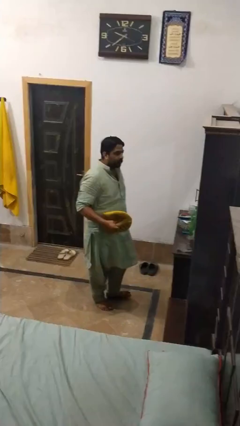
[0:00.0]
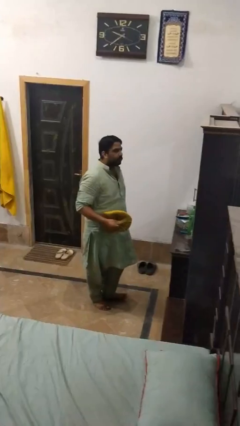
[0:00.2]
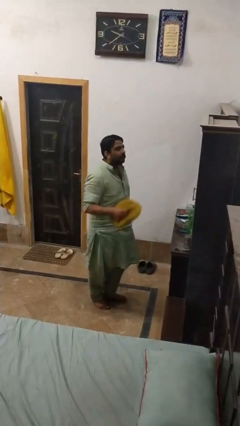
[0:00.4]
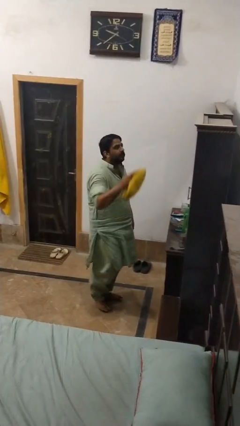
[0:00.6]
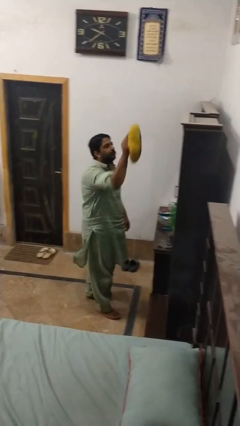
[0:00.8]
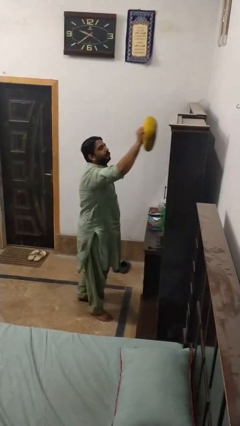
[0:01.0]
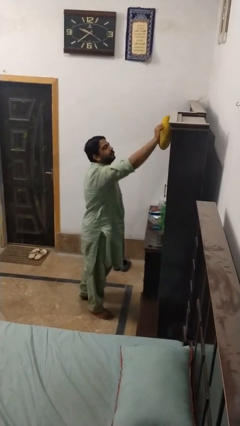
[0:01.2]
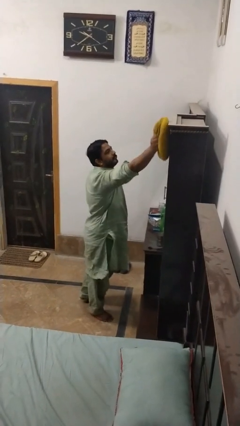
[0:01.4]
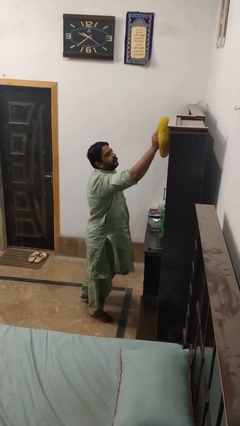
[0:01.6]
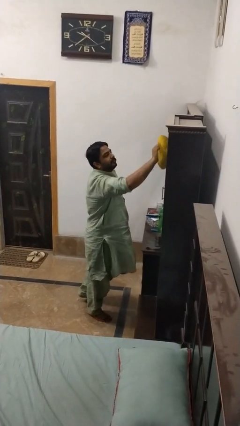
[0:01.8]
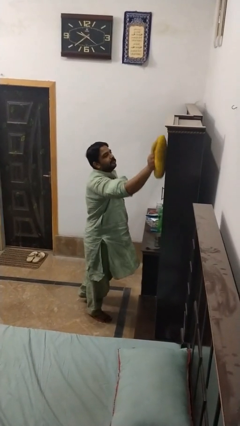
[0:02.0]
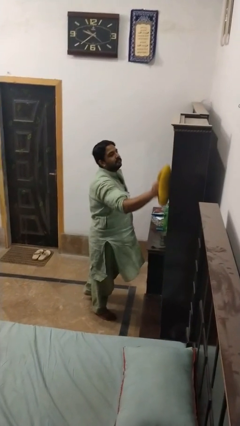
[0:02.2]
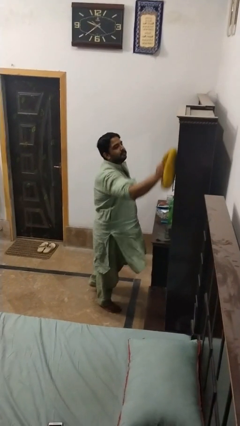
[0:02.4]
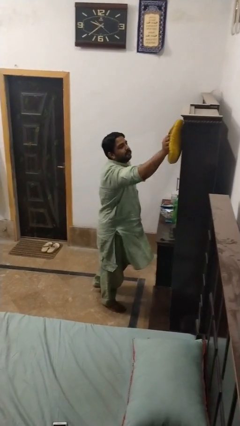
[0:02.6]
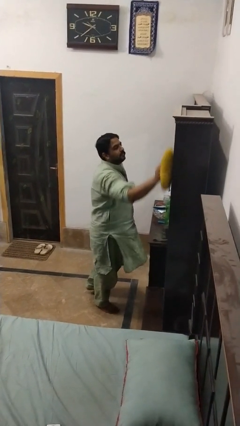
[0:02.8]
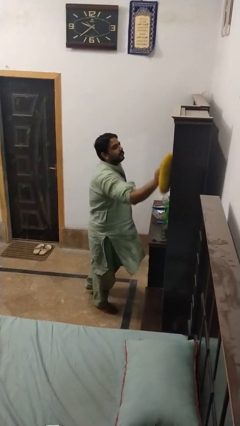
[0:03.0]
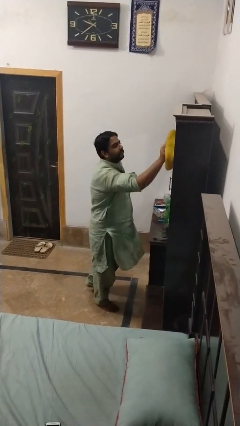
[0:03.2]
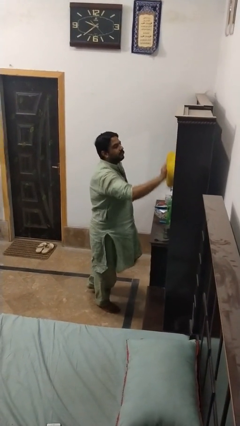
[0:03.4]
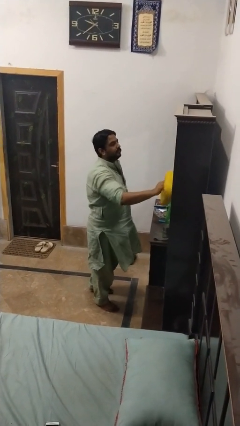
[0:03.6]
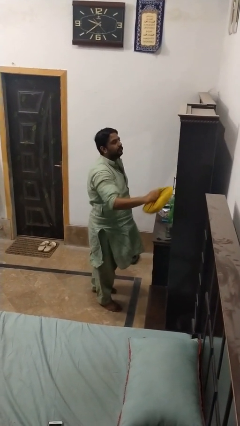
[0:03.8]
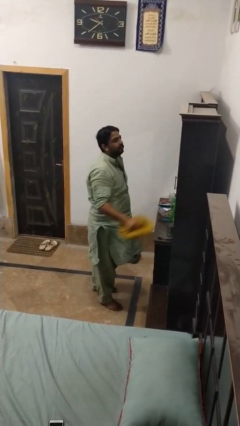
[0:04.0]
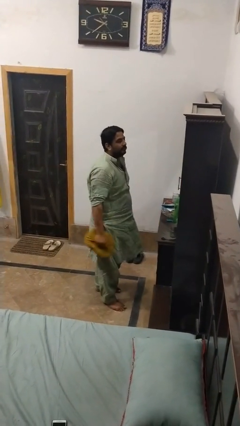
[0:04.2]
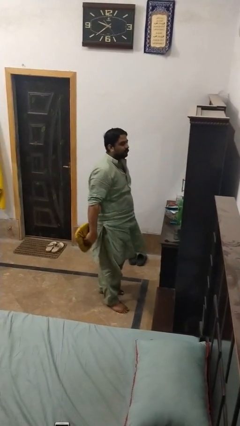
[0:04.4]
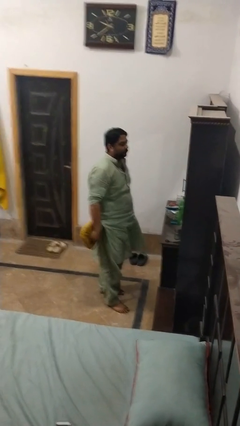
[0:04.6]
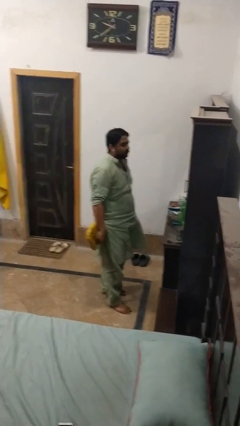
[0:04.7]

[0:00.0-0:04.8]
person dusts furniture

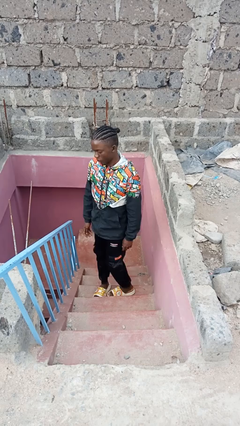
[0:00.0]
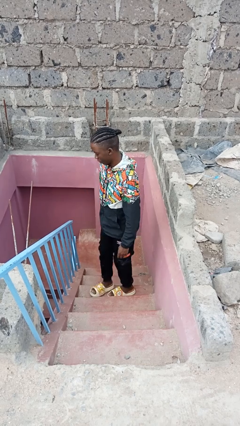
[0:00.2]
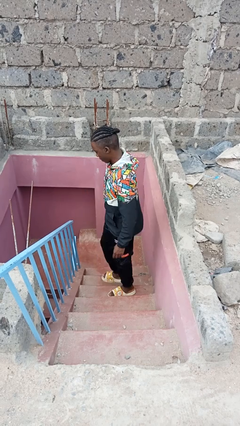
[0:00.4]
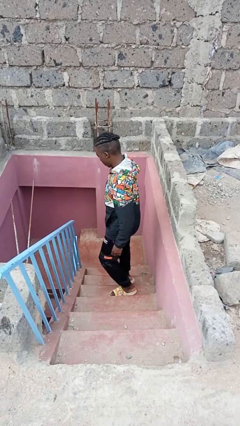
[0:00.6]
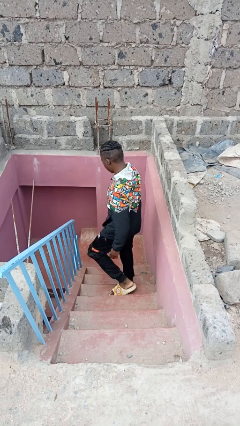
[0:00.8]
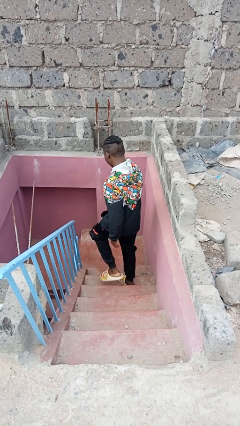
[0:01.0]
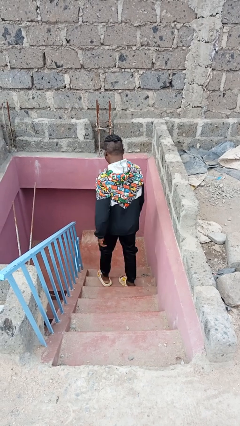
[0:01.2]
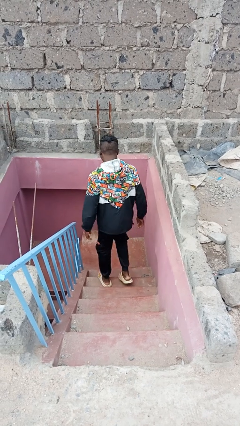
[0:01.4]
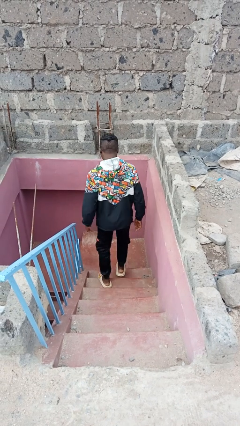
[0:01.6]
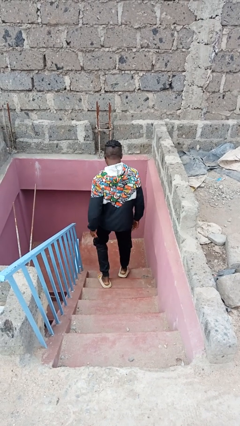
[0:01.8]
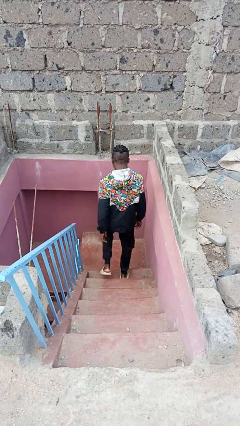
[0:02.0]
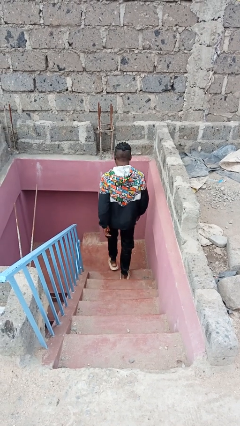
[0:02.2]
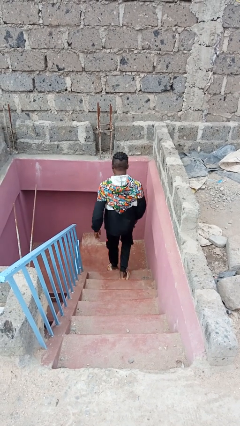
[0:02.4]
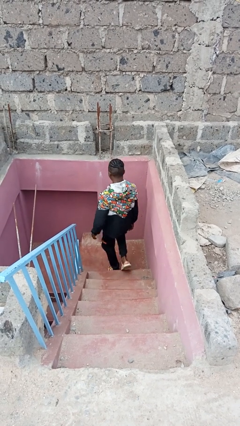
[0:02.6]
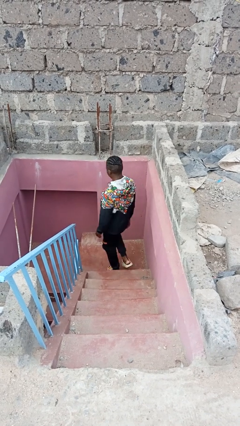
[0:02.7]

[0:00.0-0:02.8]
person climbs down stairs

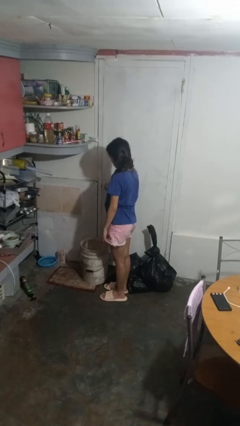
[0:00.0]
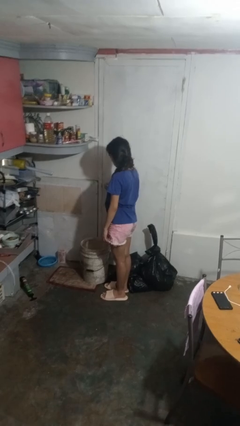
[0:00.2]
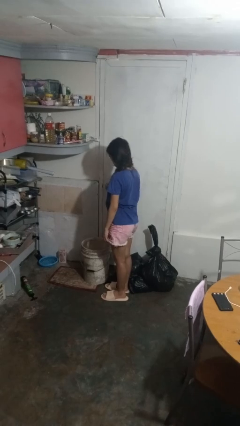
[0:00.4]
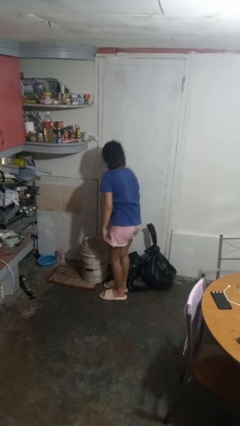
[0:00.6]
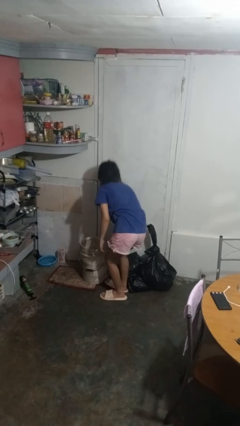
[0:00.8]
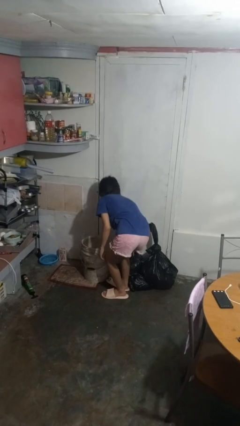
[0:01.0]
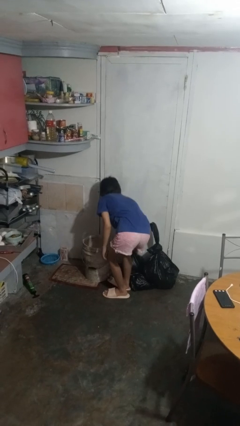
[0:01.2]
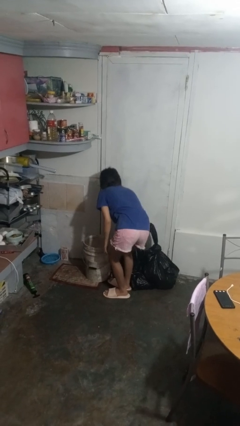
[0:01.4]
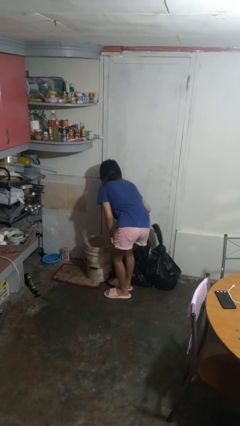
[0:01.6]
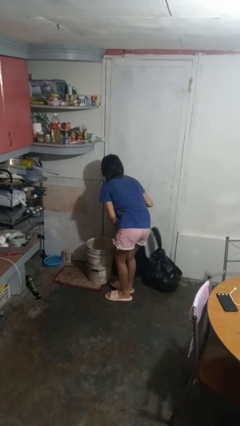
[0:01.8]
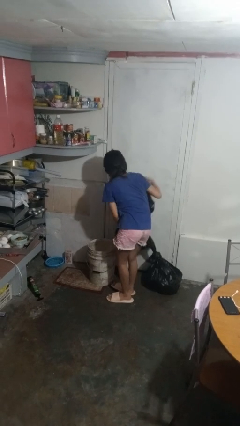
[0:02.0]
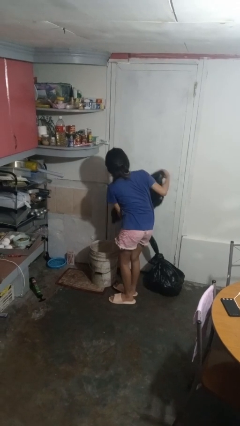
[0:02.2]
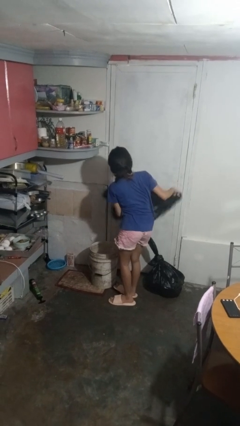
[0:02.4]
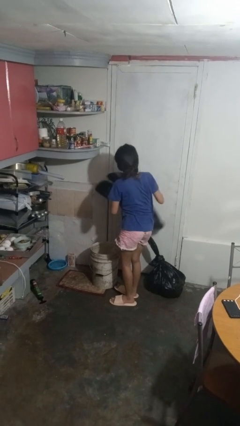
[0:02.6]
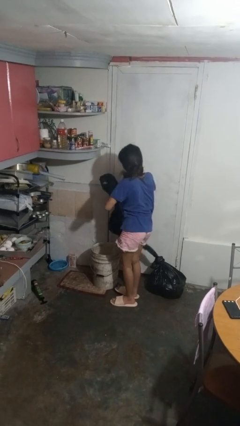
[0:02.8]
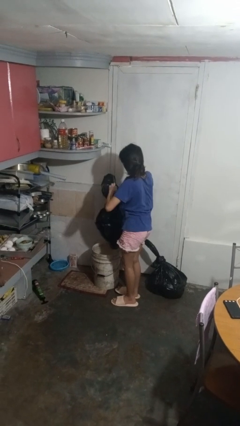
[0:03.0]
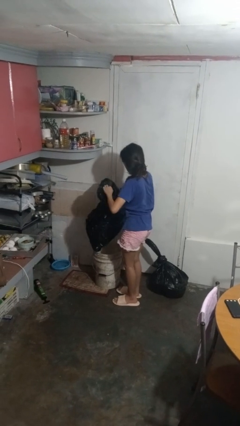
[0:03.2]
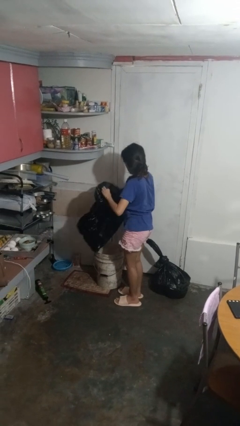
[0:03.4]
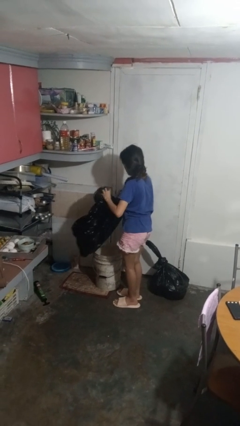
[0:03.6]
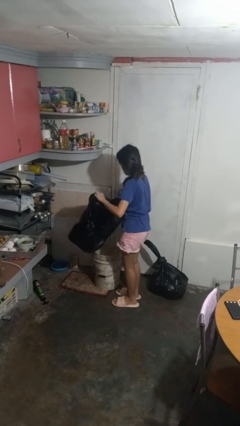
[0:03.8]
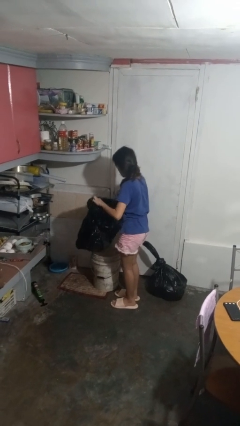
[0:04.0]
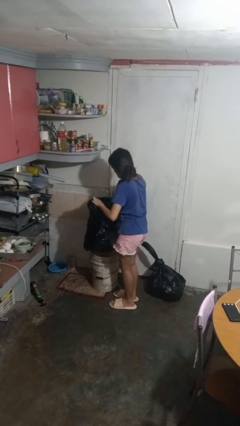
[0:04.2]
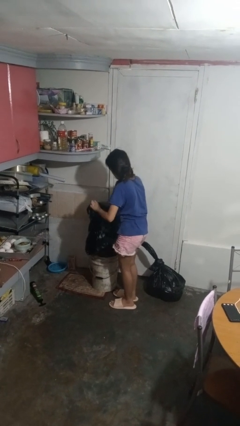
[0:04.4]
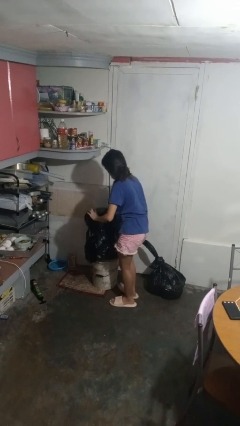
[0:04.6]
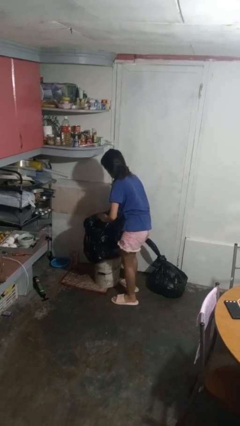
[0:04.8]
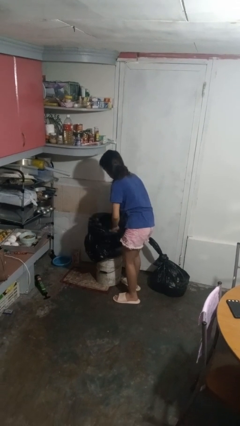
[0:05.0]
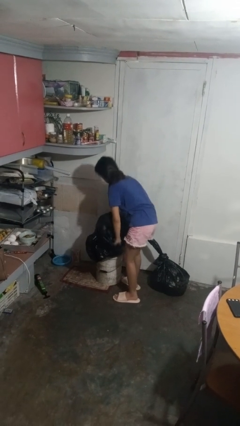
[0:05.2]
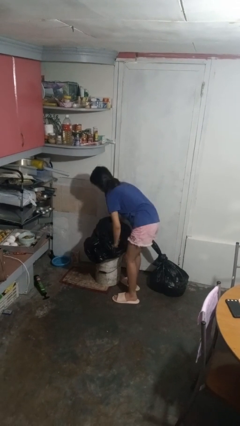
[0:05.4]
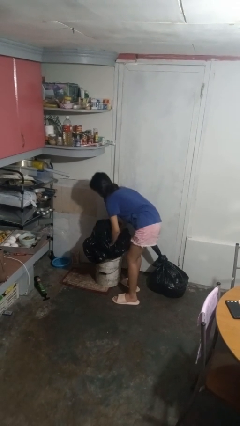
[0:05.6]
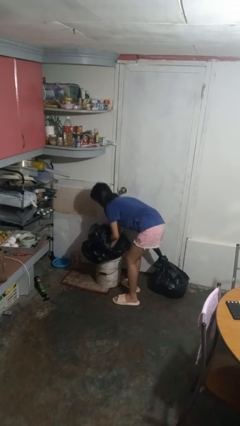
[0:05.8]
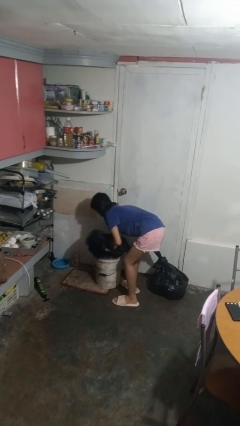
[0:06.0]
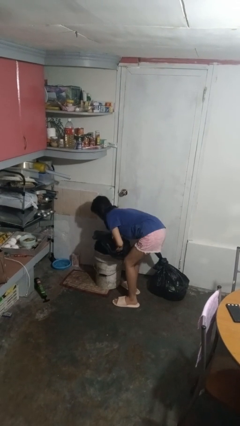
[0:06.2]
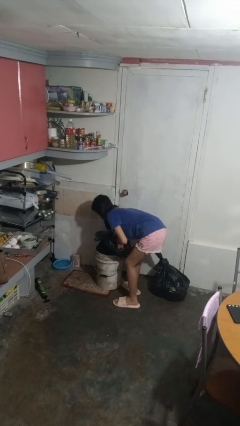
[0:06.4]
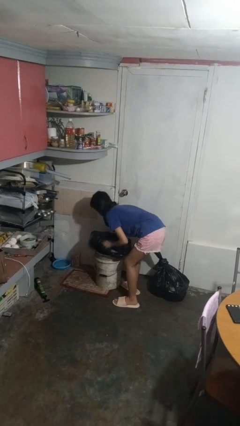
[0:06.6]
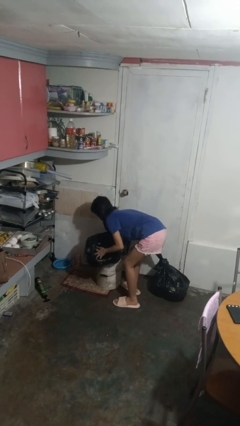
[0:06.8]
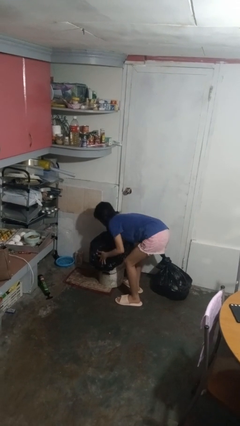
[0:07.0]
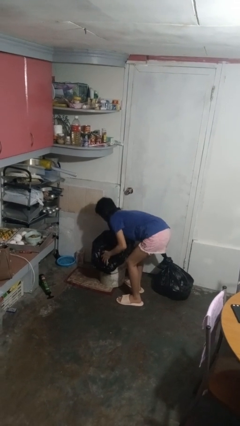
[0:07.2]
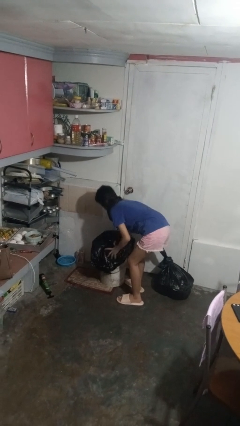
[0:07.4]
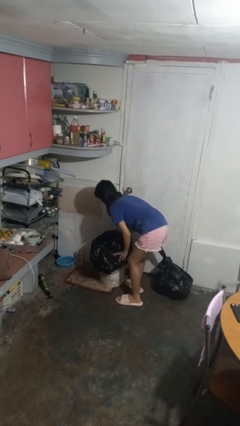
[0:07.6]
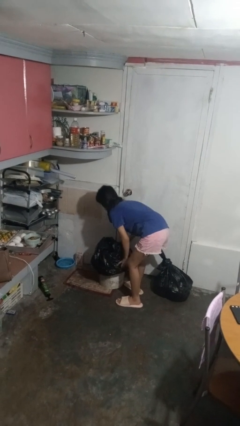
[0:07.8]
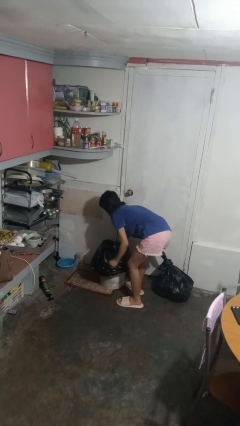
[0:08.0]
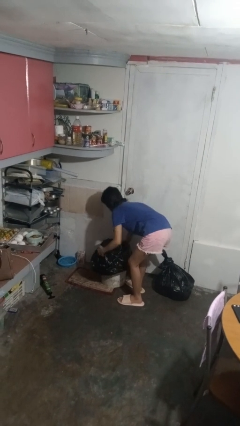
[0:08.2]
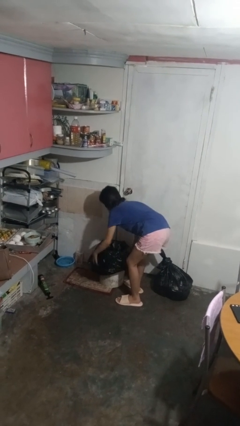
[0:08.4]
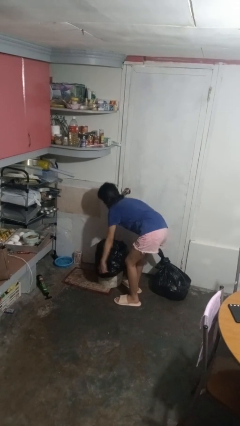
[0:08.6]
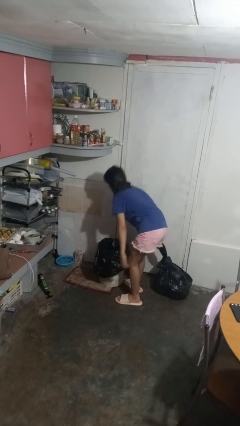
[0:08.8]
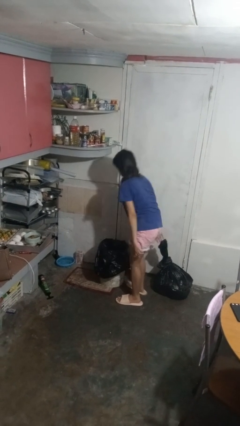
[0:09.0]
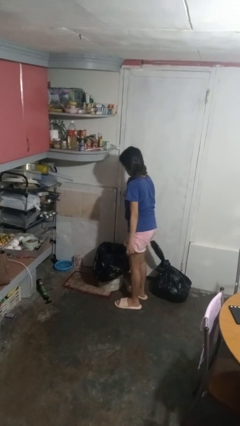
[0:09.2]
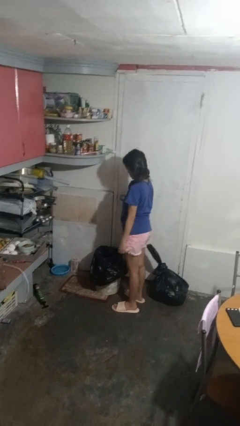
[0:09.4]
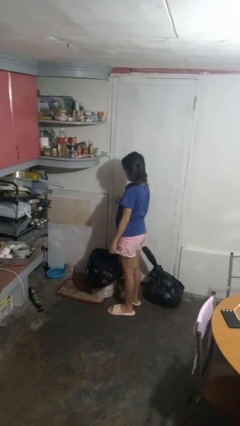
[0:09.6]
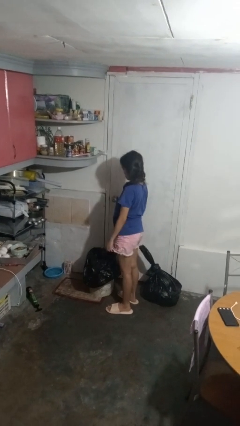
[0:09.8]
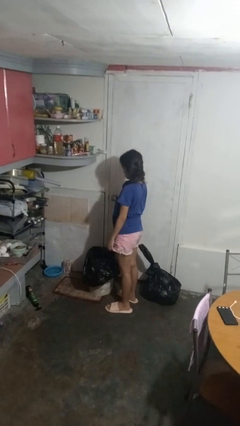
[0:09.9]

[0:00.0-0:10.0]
person inserts trashbag into trashcan

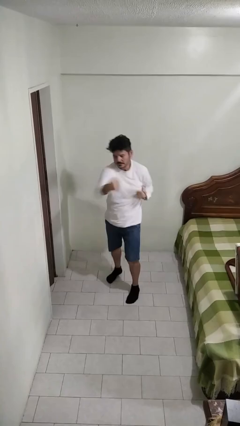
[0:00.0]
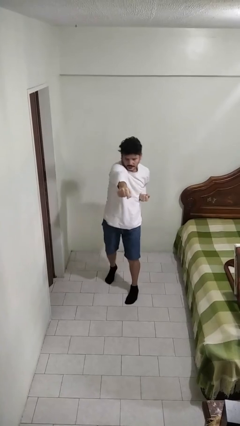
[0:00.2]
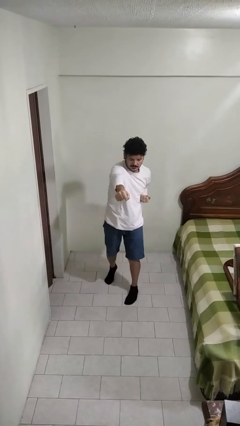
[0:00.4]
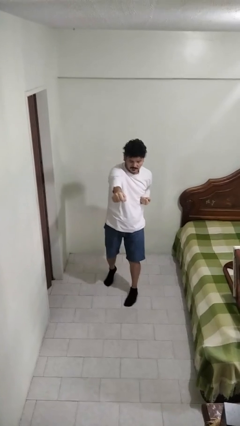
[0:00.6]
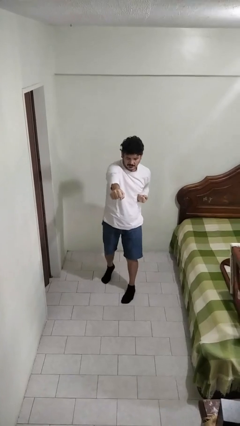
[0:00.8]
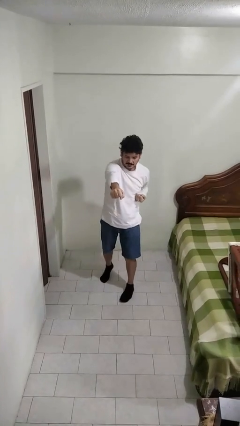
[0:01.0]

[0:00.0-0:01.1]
person karate chop
